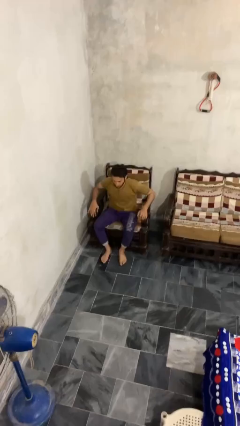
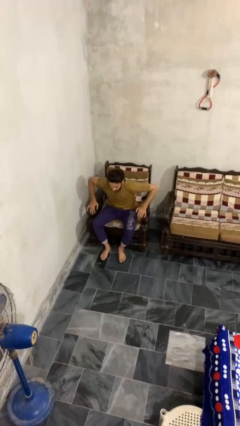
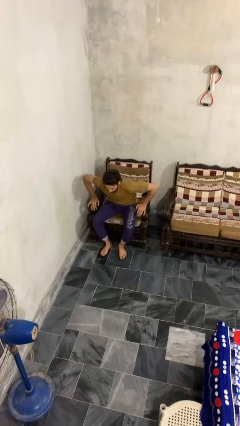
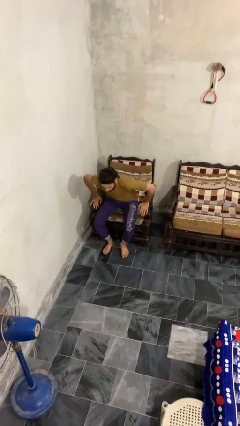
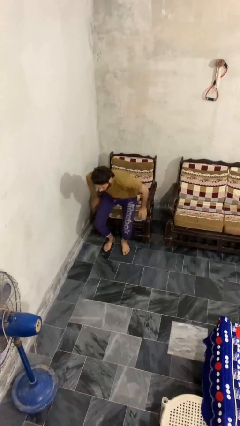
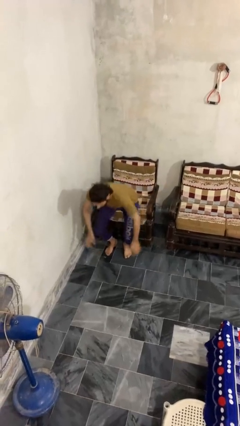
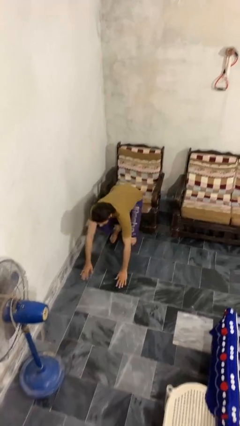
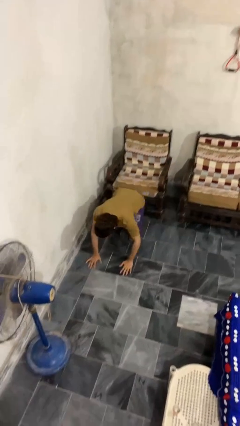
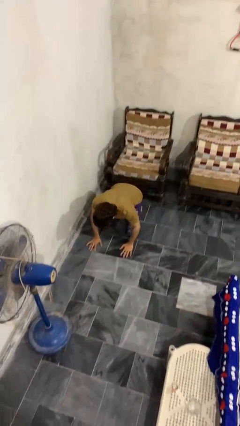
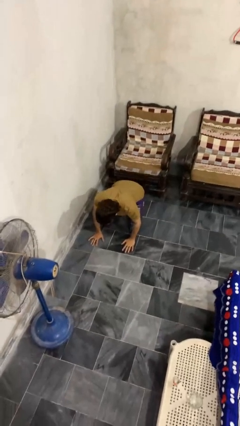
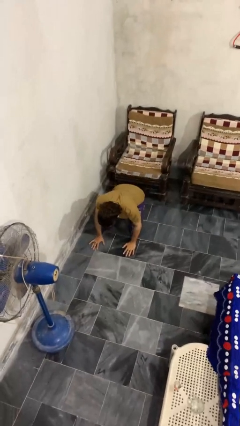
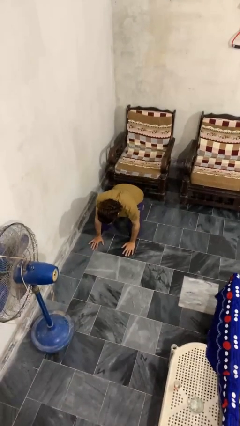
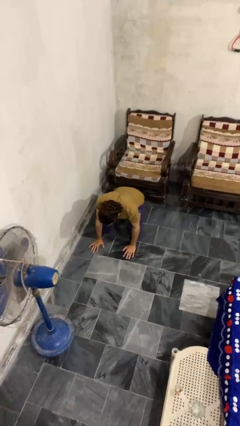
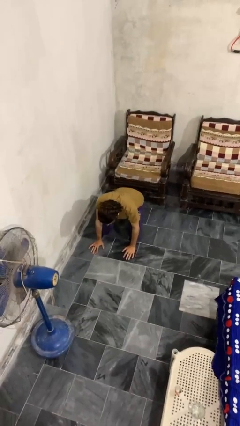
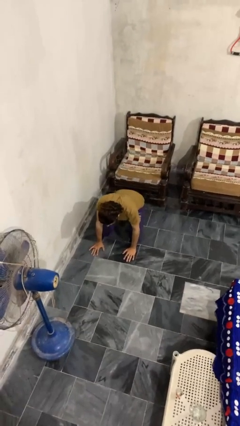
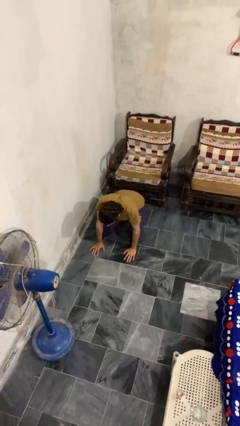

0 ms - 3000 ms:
person falls from chair

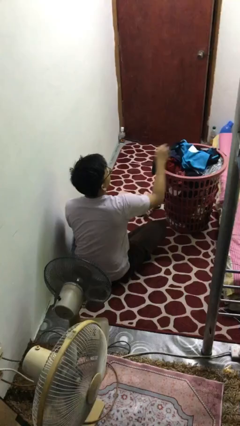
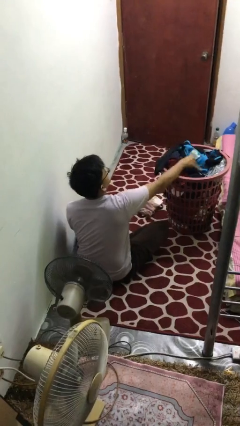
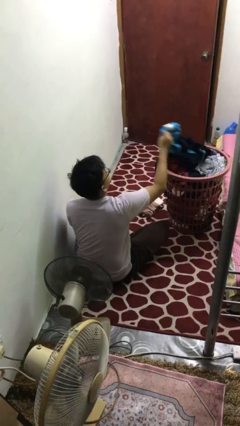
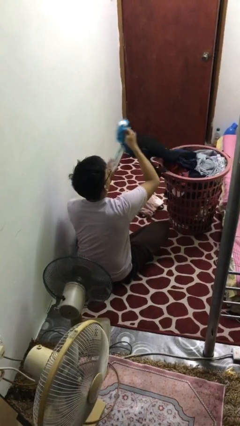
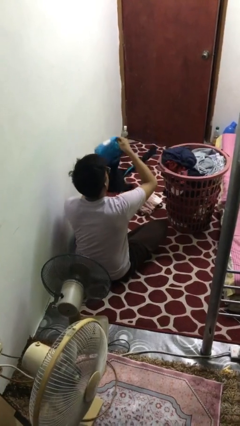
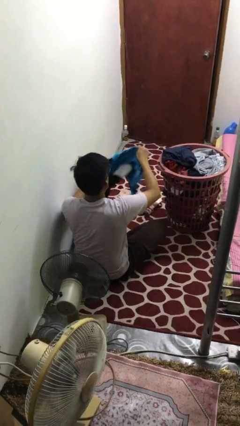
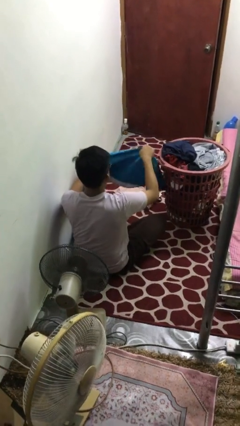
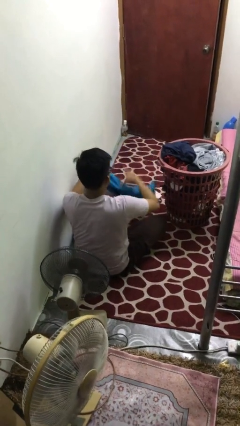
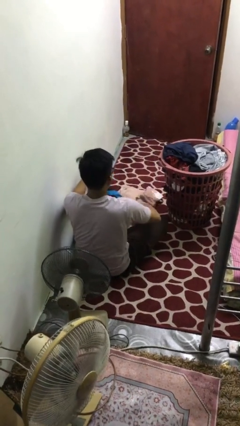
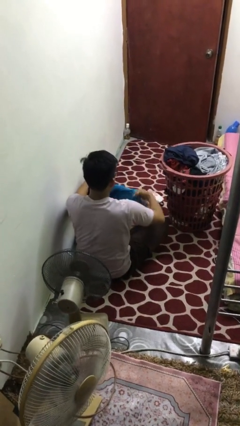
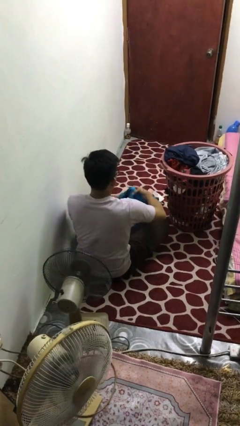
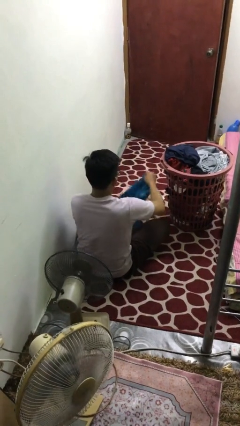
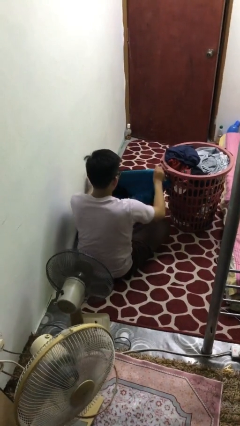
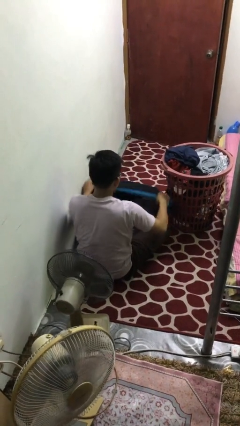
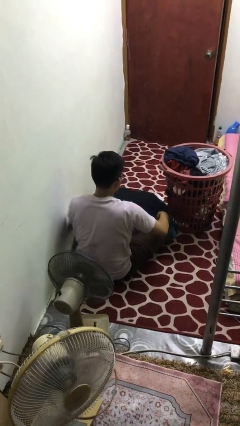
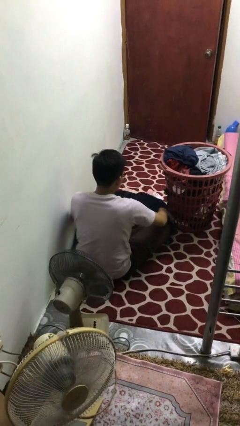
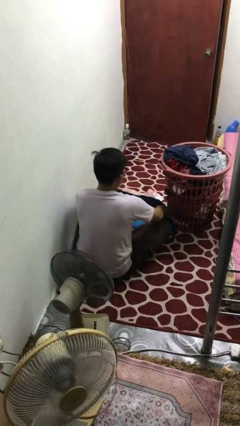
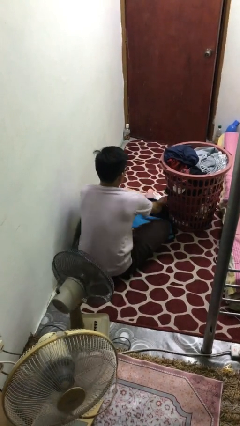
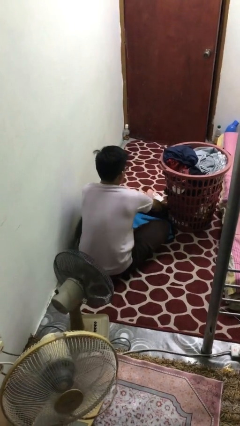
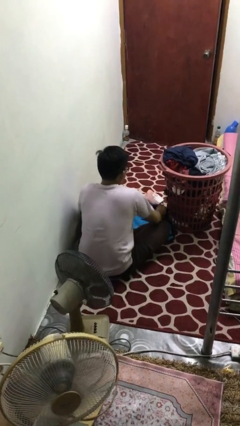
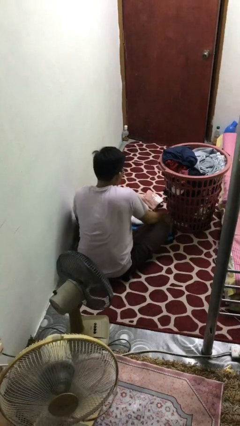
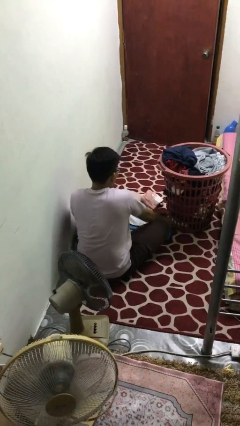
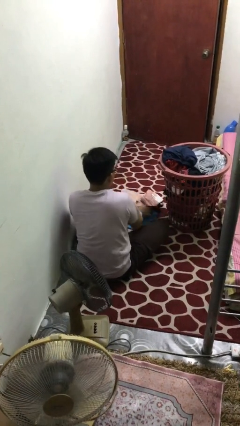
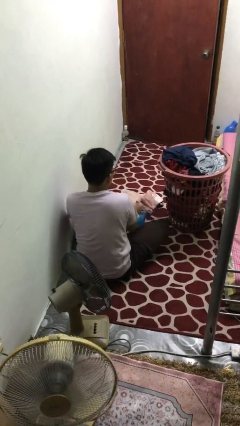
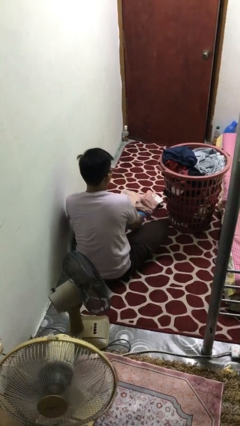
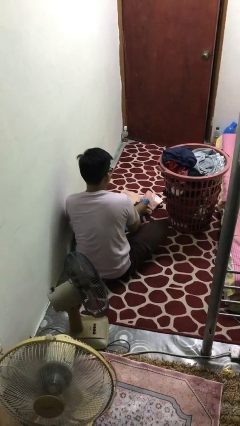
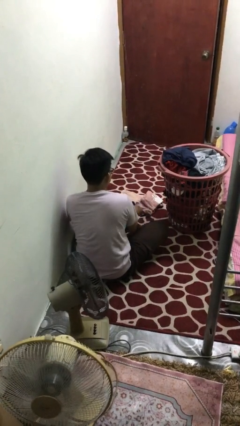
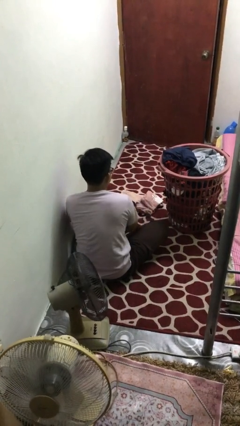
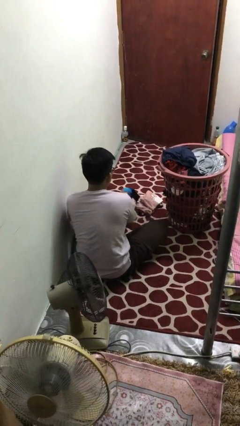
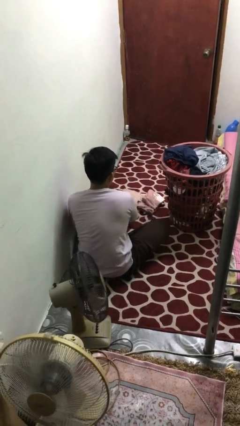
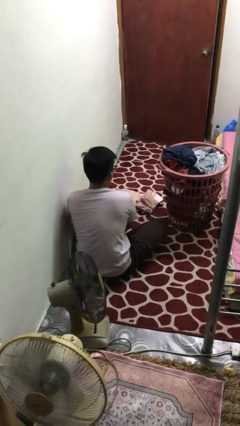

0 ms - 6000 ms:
person folds shirt

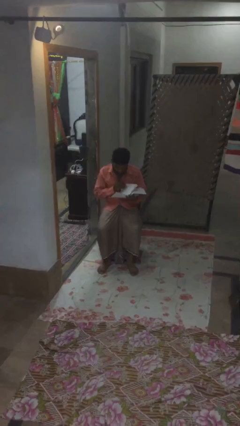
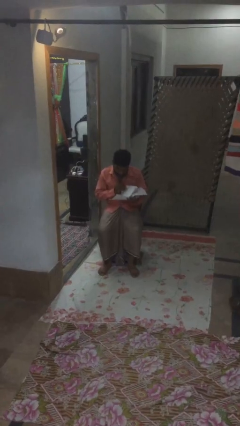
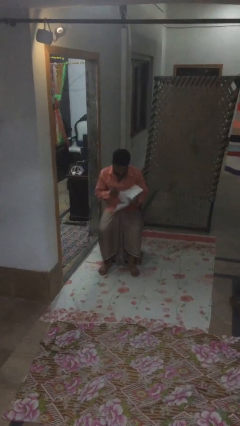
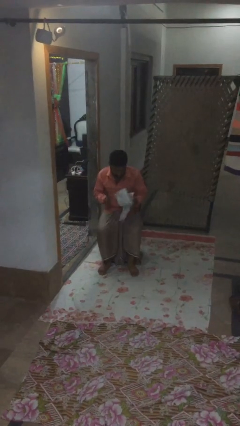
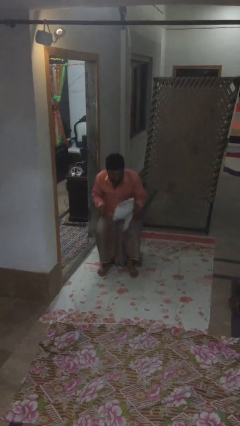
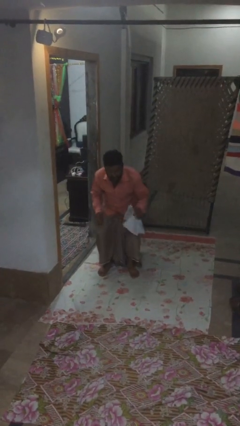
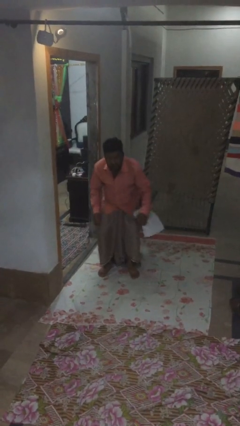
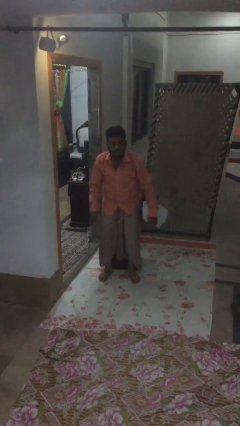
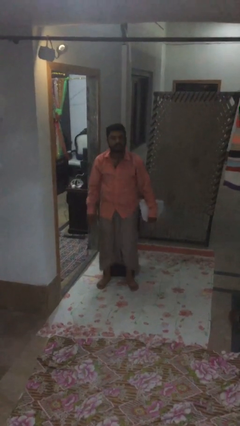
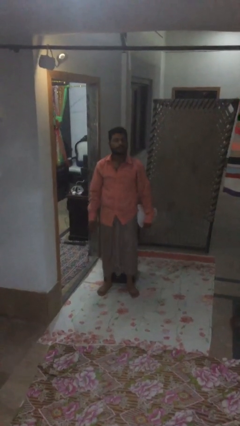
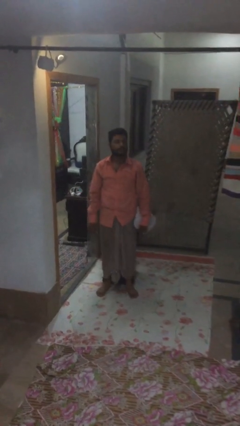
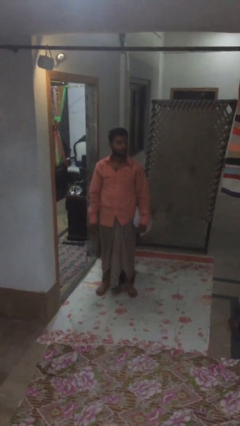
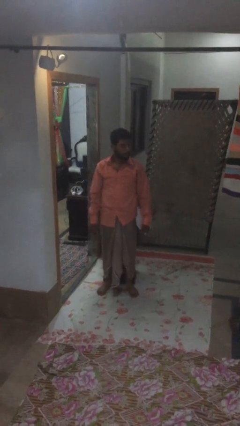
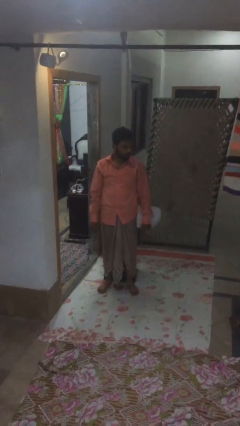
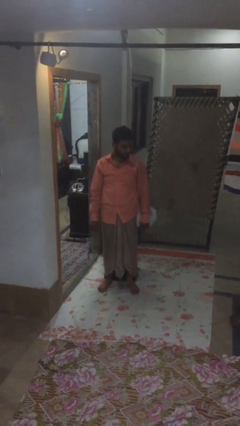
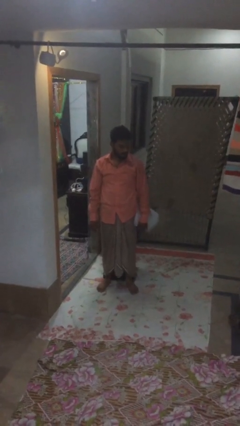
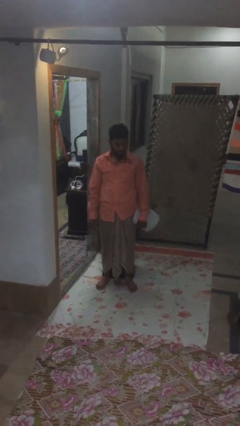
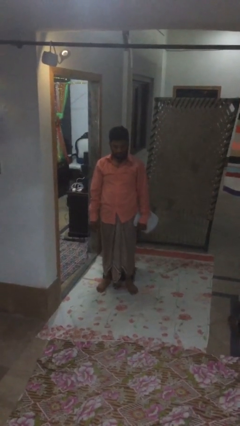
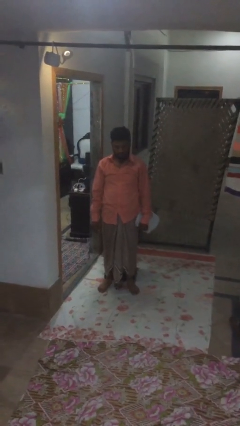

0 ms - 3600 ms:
person stands up

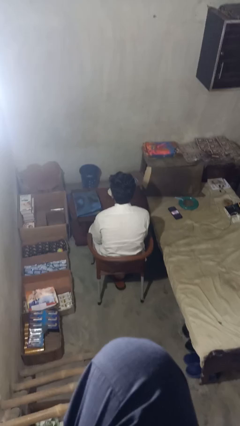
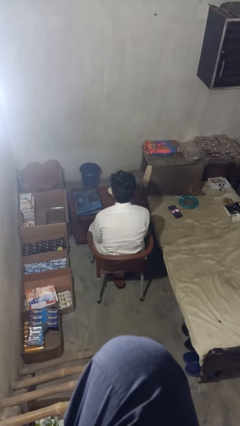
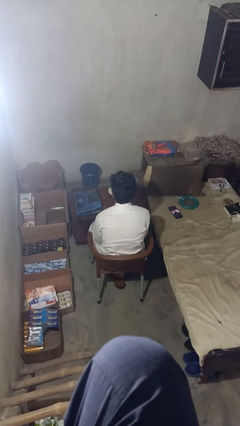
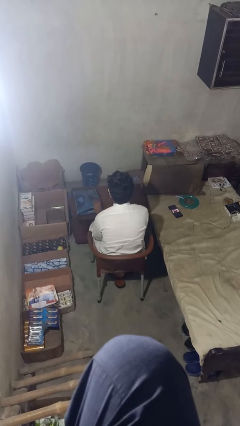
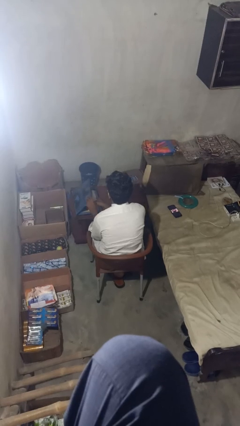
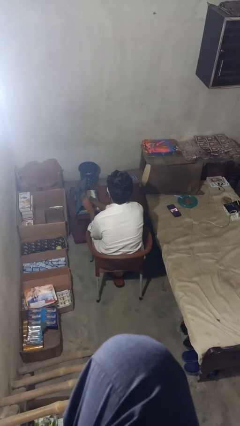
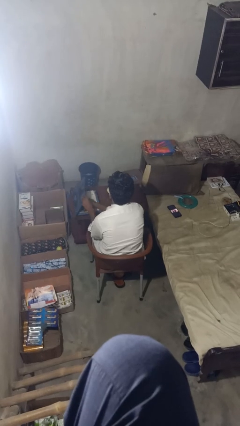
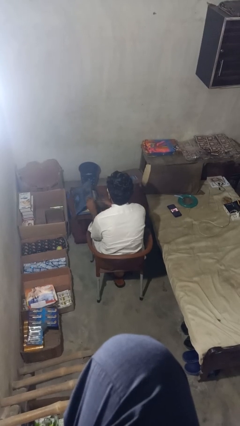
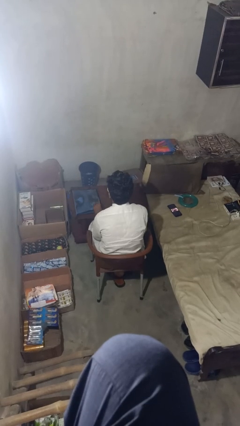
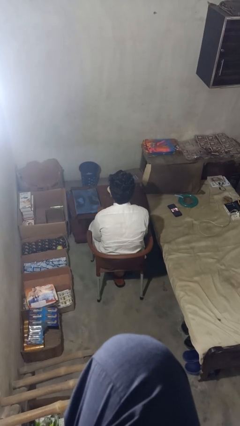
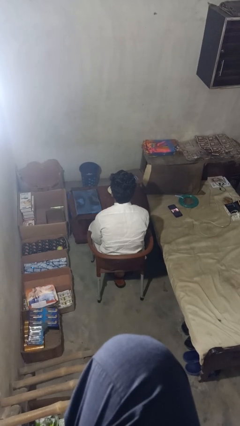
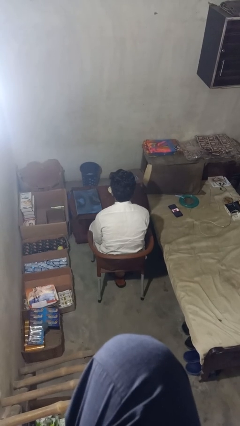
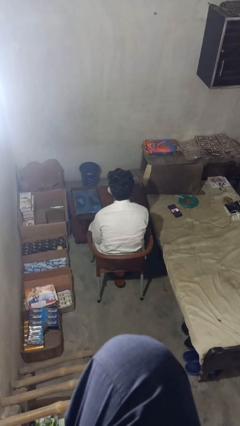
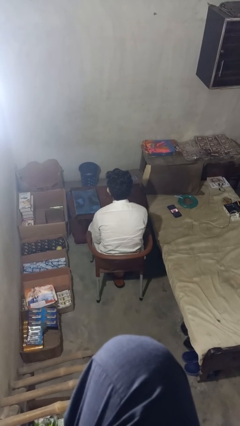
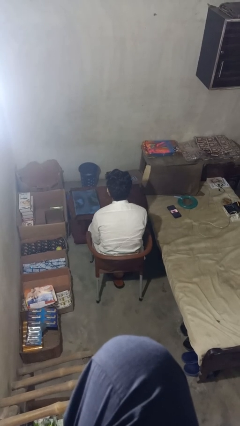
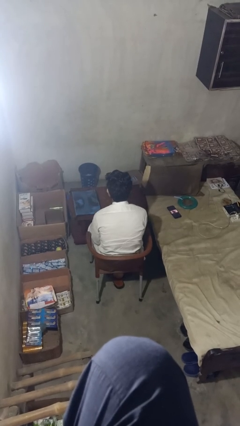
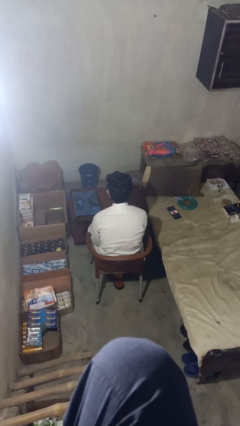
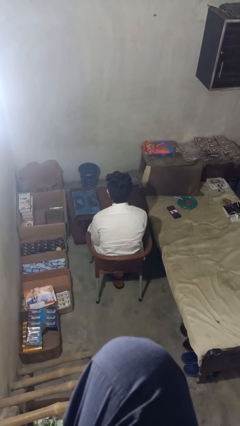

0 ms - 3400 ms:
person puts object into bag

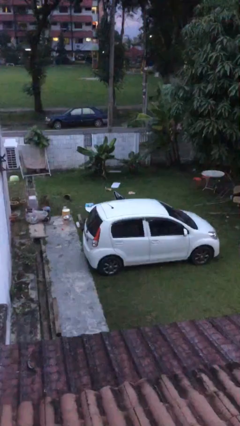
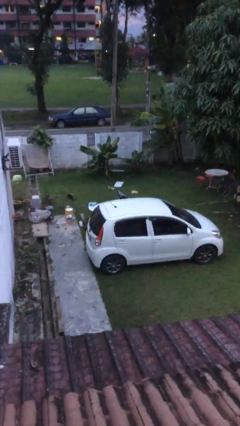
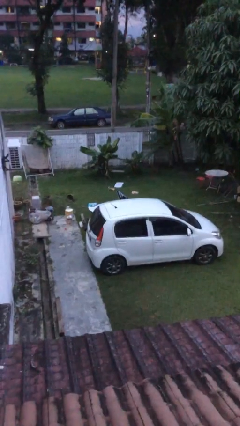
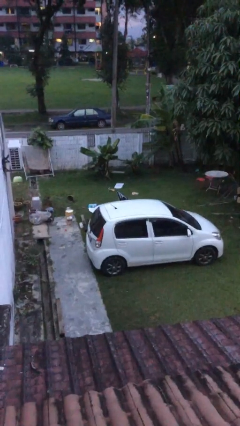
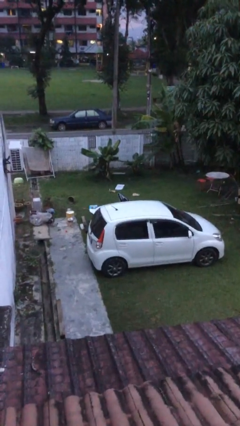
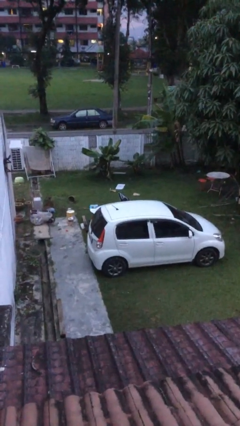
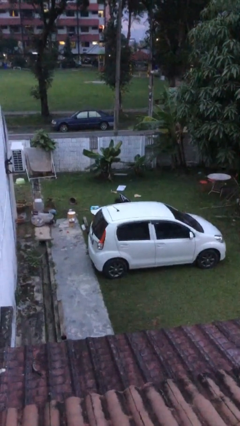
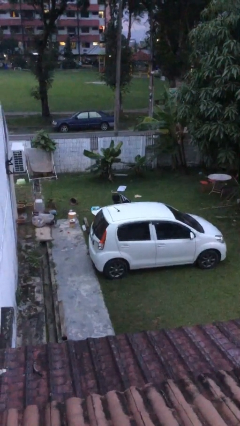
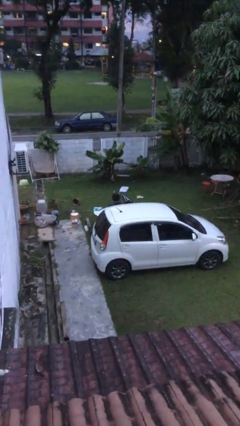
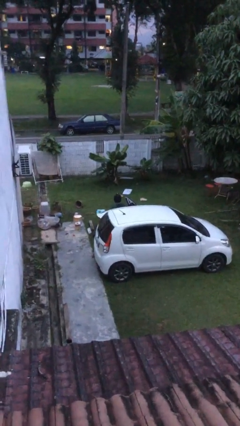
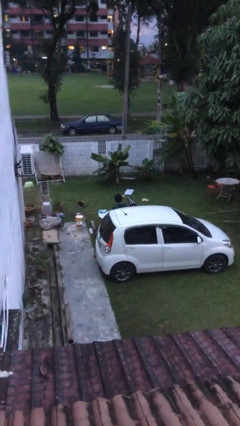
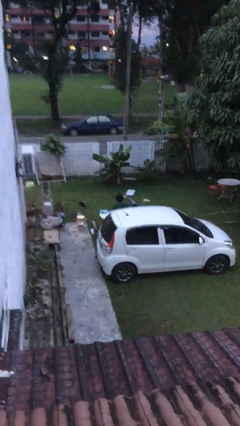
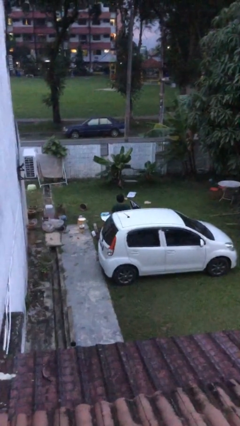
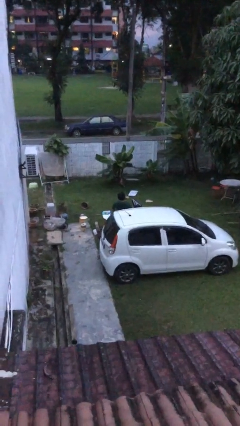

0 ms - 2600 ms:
person exits car
